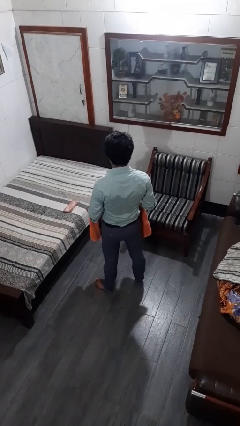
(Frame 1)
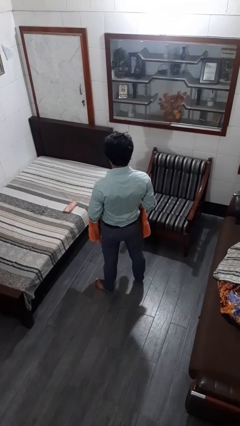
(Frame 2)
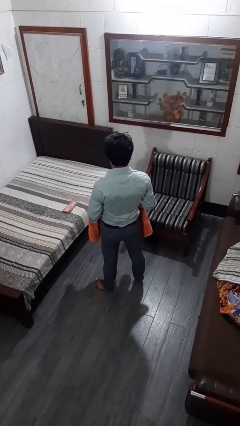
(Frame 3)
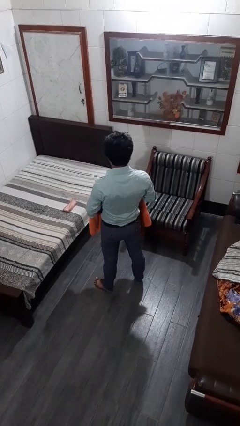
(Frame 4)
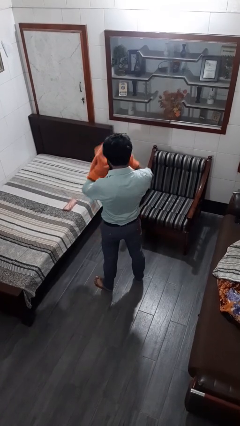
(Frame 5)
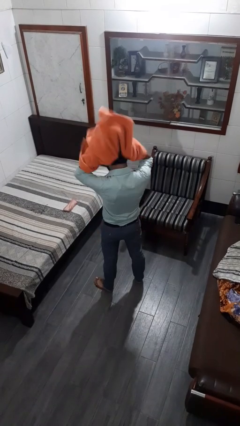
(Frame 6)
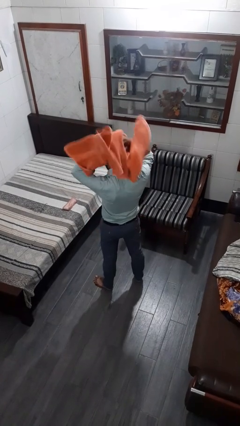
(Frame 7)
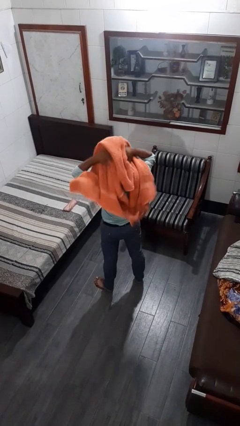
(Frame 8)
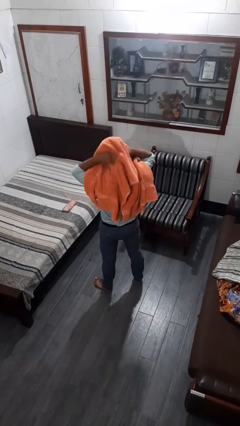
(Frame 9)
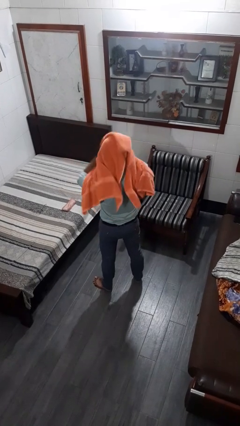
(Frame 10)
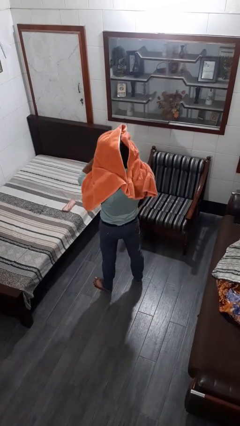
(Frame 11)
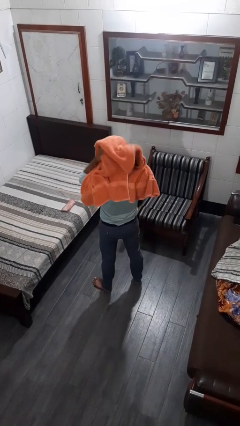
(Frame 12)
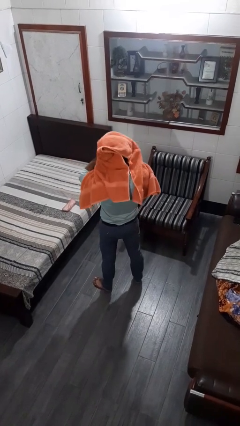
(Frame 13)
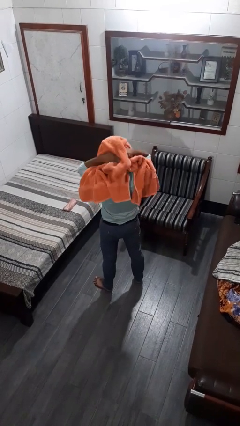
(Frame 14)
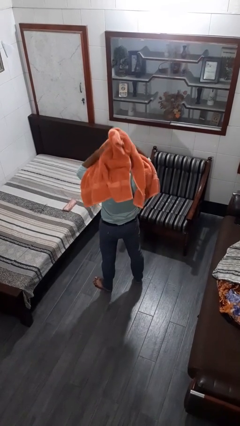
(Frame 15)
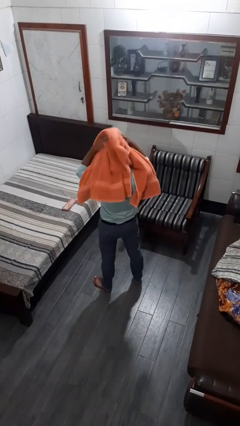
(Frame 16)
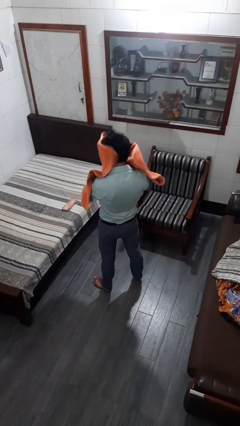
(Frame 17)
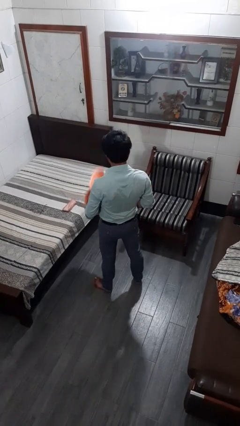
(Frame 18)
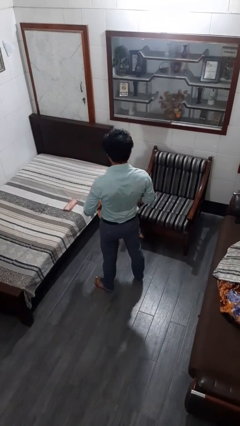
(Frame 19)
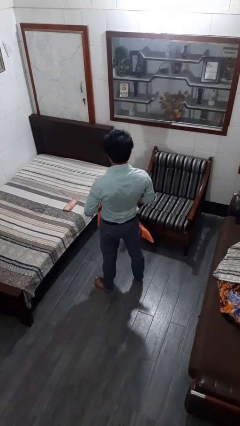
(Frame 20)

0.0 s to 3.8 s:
person dries hair with towel

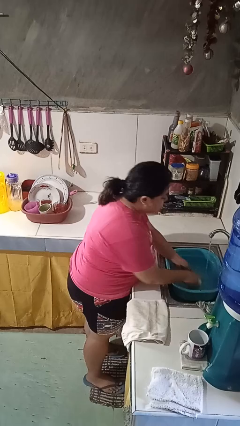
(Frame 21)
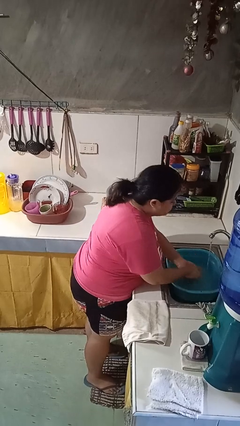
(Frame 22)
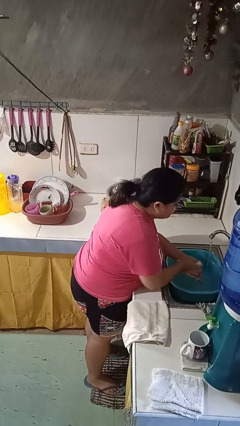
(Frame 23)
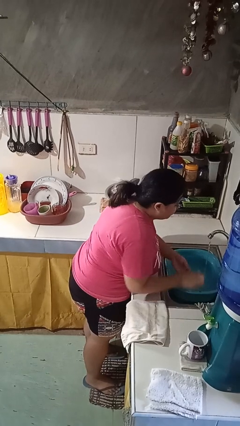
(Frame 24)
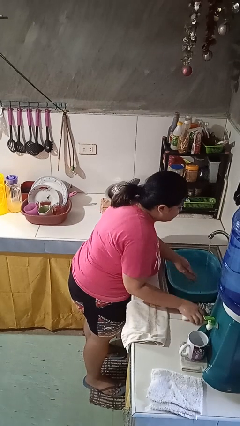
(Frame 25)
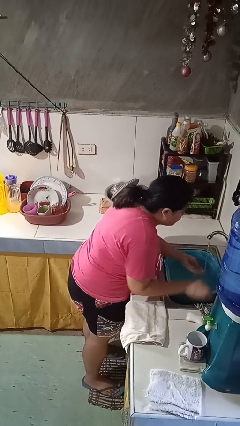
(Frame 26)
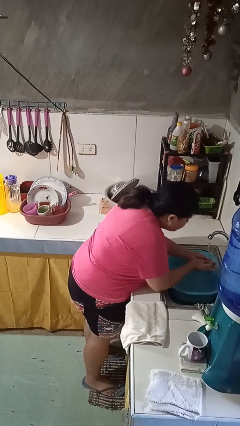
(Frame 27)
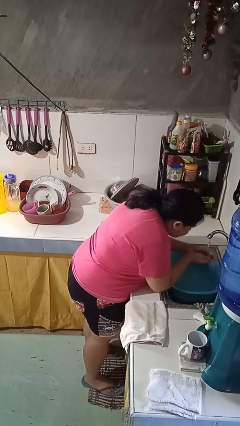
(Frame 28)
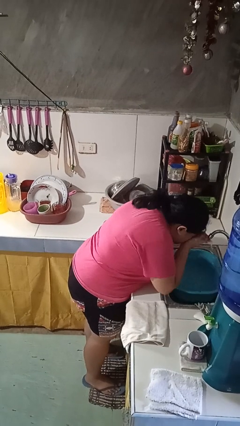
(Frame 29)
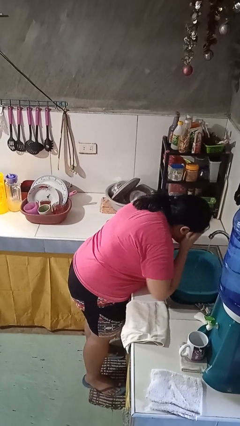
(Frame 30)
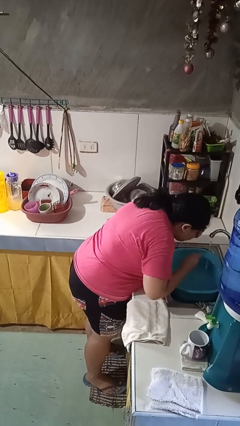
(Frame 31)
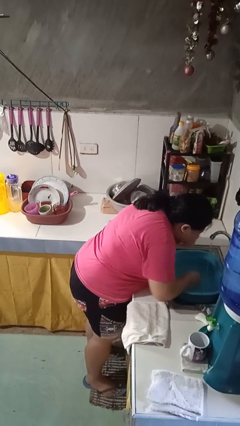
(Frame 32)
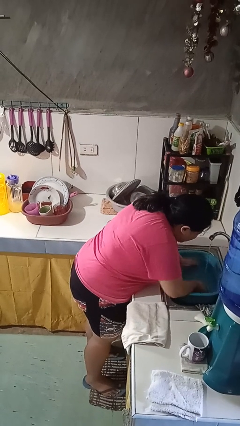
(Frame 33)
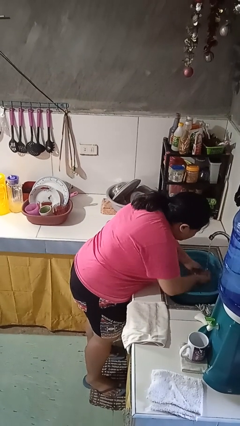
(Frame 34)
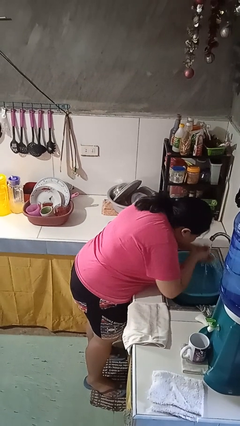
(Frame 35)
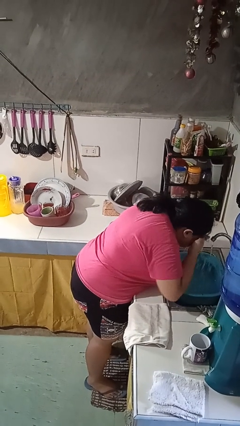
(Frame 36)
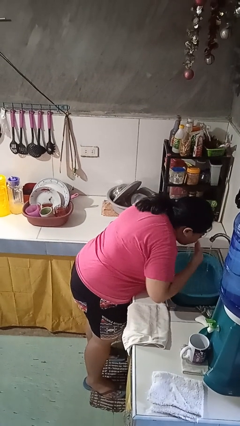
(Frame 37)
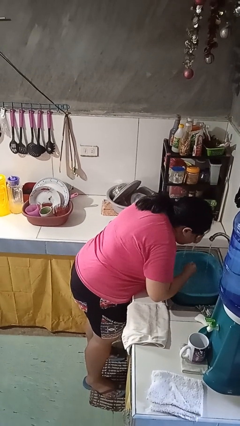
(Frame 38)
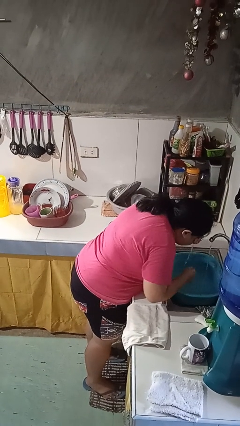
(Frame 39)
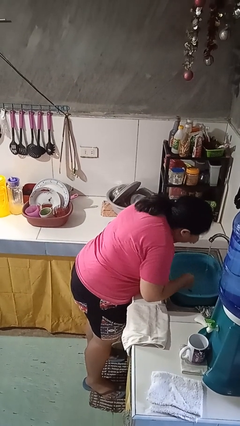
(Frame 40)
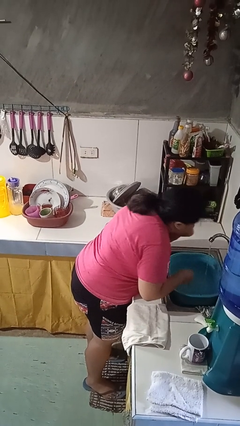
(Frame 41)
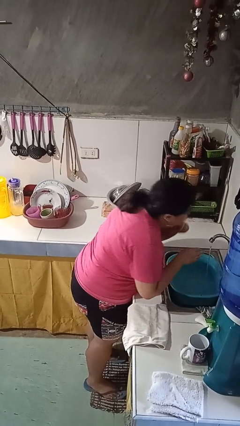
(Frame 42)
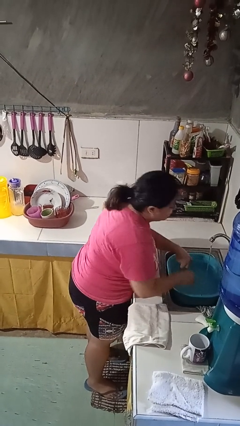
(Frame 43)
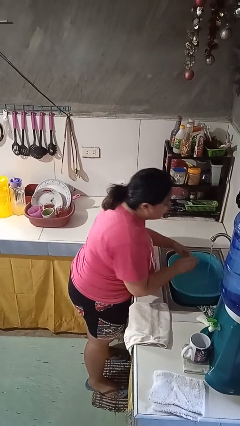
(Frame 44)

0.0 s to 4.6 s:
person washes face

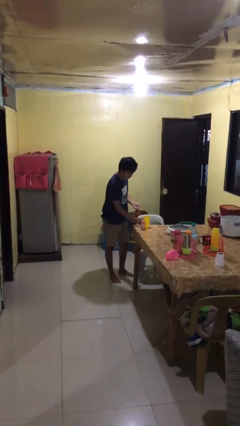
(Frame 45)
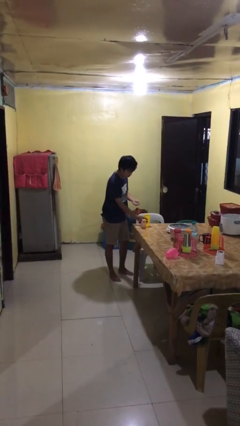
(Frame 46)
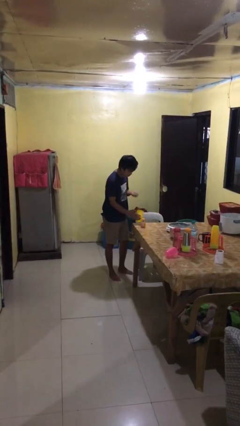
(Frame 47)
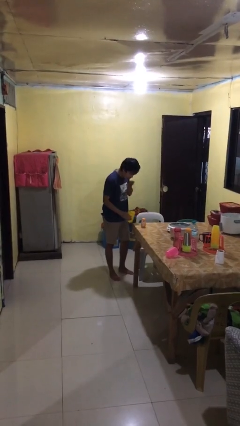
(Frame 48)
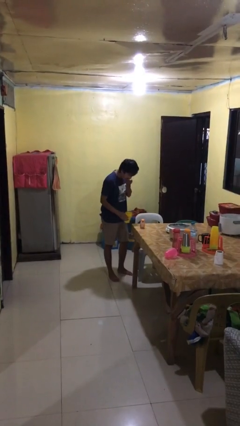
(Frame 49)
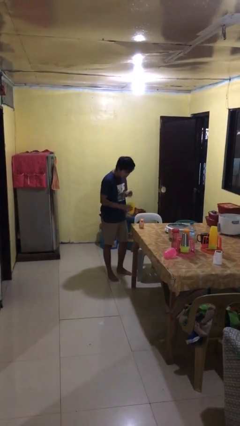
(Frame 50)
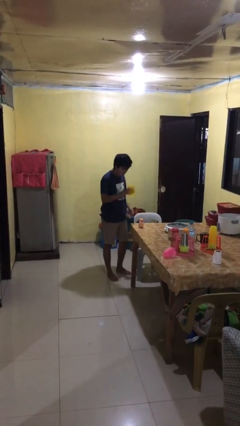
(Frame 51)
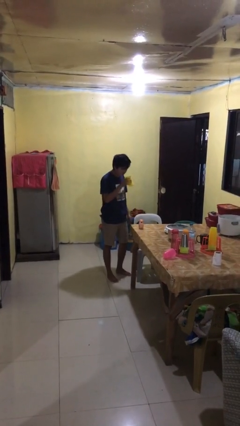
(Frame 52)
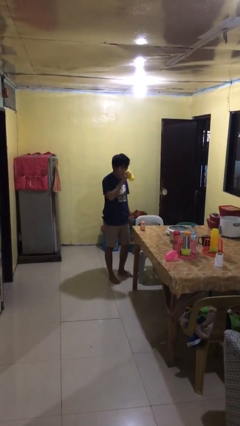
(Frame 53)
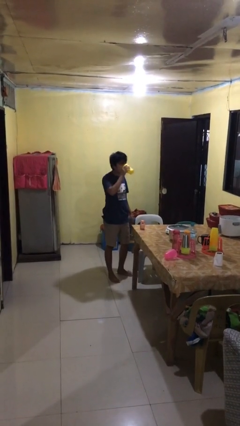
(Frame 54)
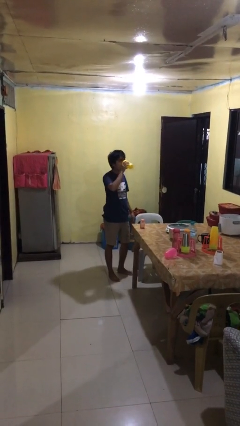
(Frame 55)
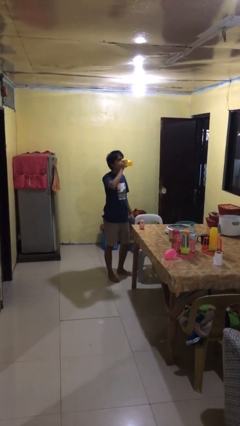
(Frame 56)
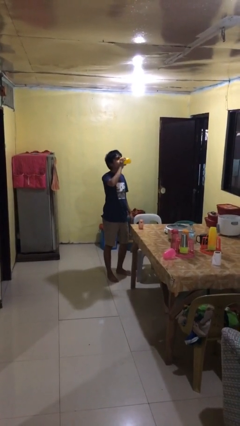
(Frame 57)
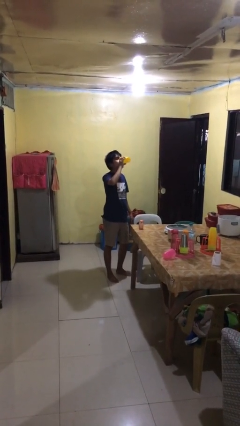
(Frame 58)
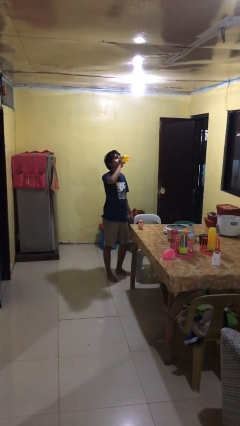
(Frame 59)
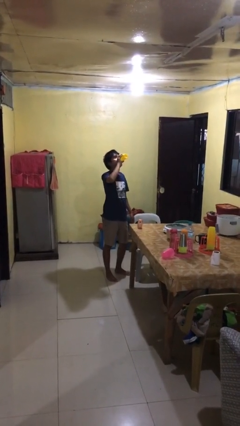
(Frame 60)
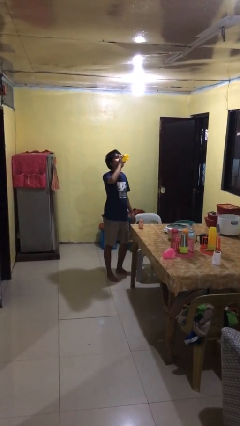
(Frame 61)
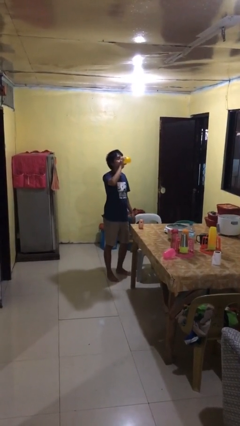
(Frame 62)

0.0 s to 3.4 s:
person drinks from cup

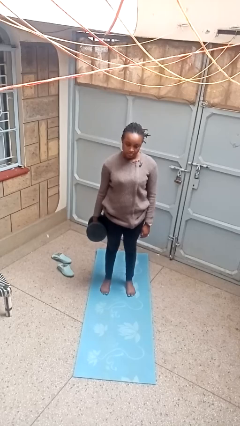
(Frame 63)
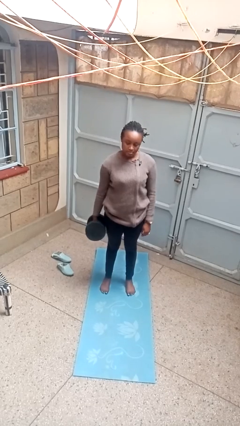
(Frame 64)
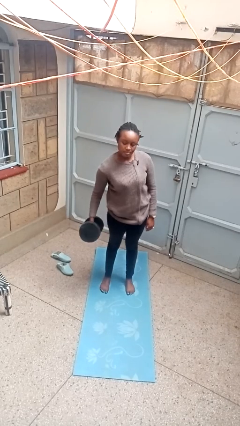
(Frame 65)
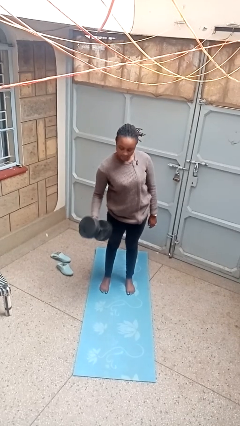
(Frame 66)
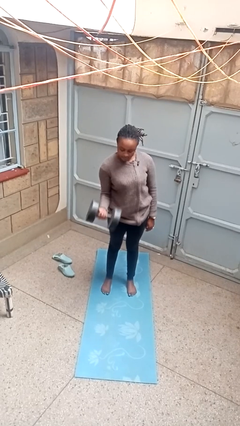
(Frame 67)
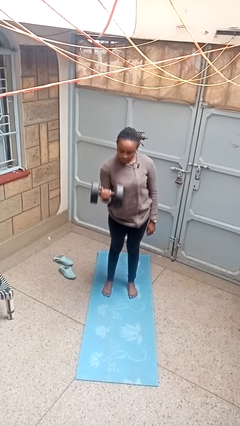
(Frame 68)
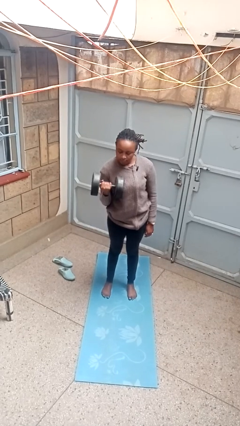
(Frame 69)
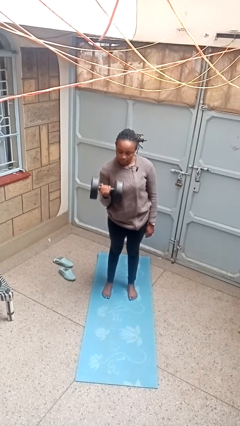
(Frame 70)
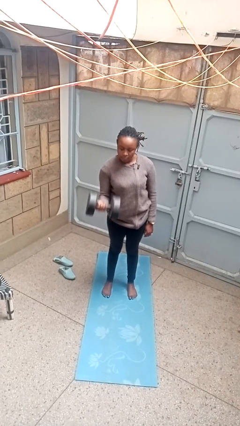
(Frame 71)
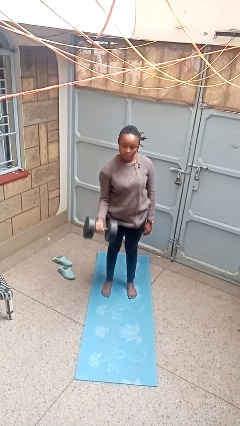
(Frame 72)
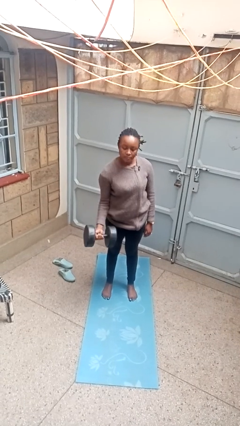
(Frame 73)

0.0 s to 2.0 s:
person lifts dumbbells

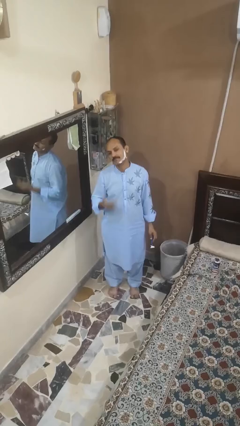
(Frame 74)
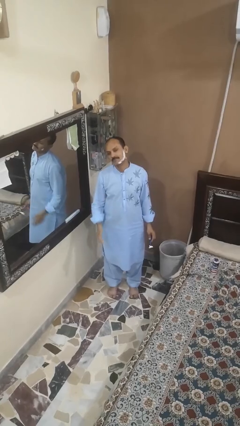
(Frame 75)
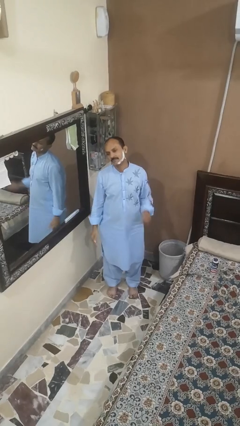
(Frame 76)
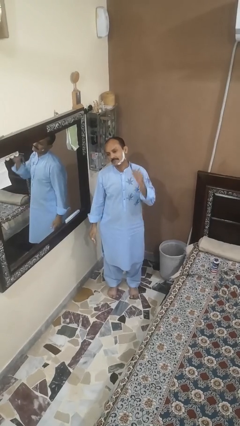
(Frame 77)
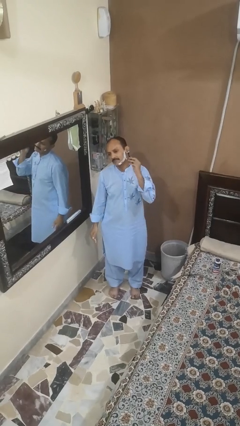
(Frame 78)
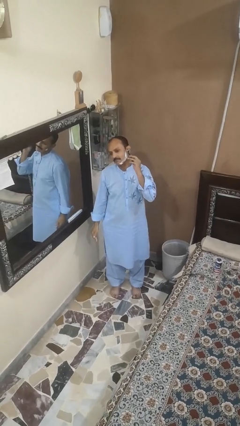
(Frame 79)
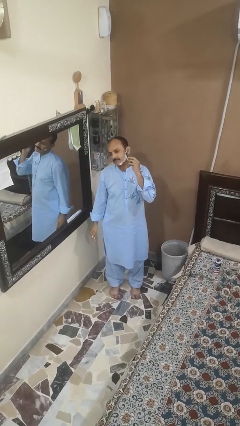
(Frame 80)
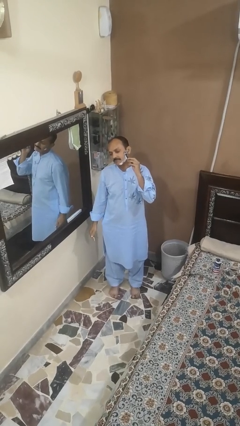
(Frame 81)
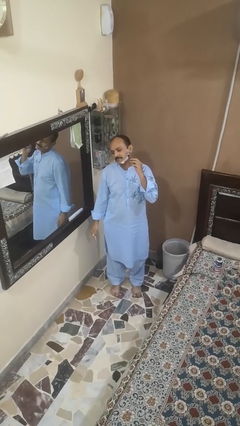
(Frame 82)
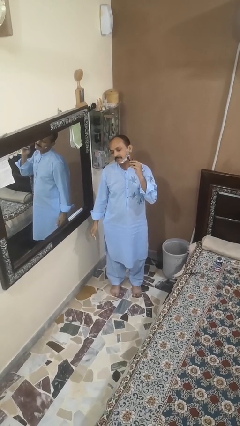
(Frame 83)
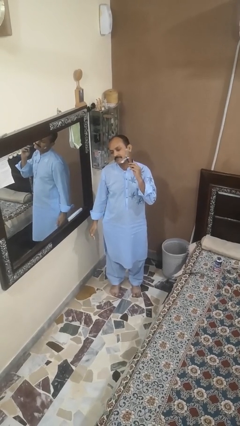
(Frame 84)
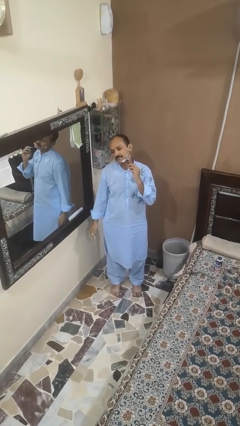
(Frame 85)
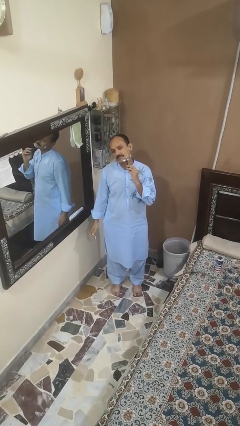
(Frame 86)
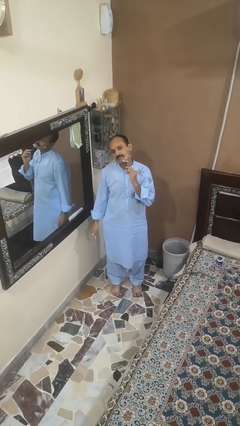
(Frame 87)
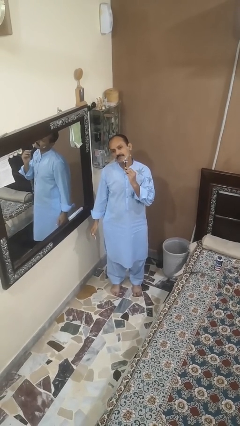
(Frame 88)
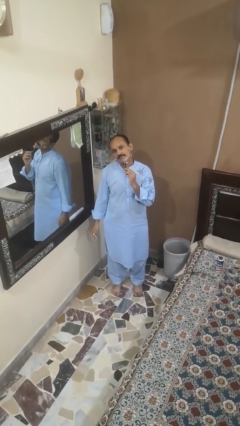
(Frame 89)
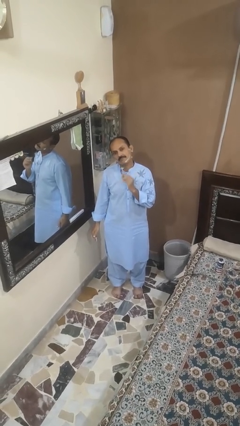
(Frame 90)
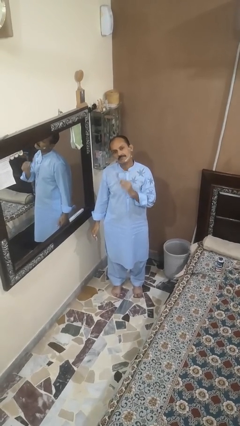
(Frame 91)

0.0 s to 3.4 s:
person shaves face

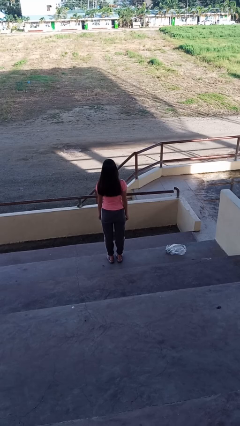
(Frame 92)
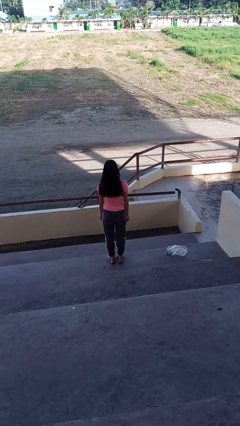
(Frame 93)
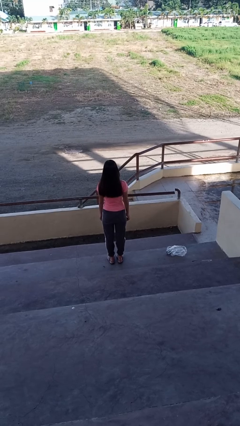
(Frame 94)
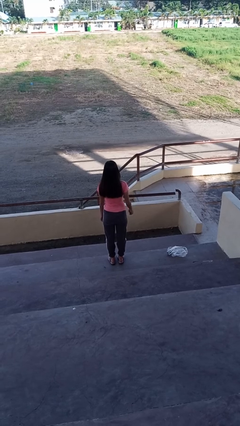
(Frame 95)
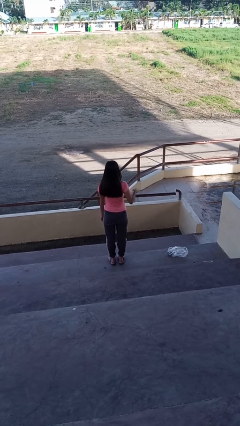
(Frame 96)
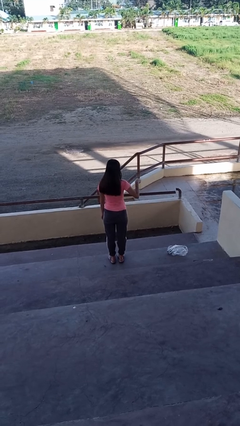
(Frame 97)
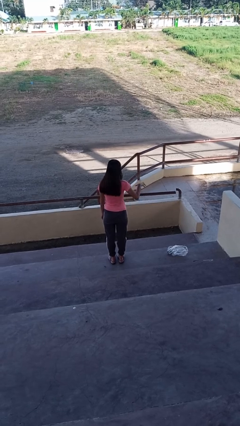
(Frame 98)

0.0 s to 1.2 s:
person drops object
